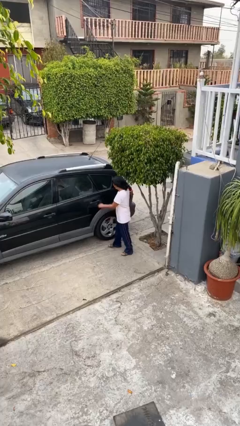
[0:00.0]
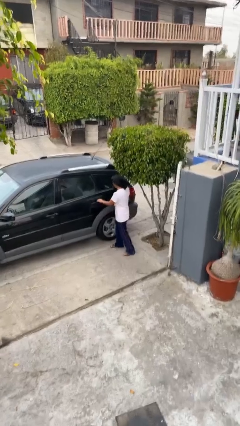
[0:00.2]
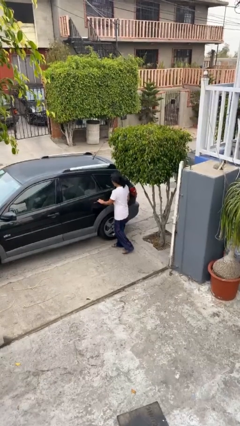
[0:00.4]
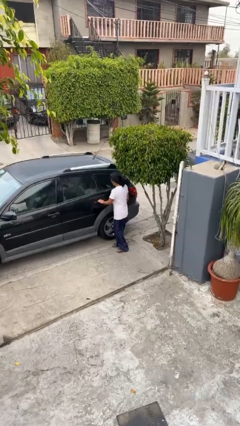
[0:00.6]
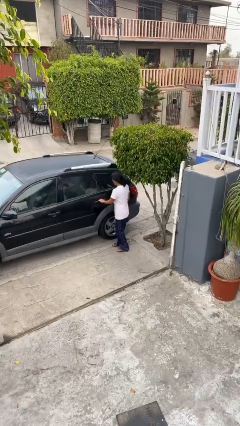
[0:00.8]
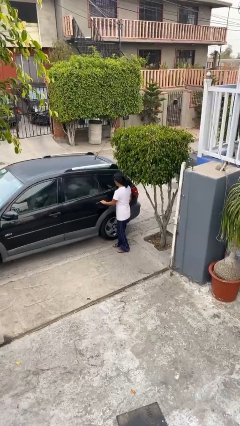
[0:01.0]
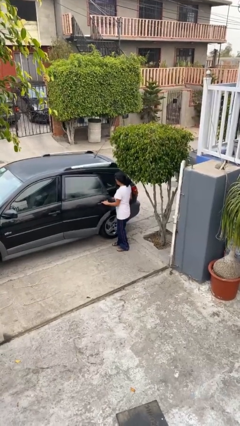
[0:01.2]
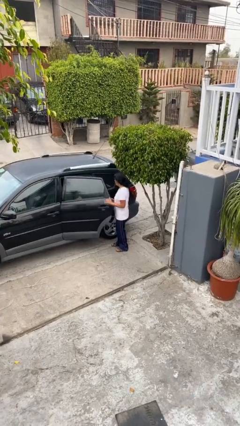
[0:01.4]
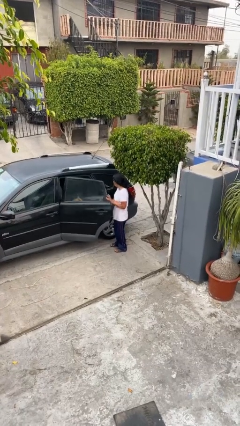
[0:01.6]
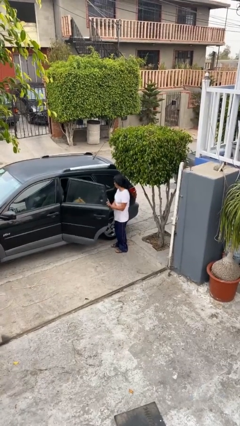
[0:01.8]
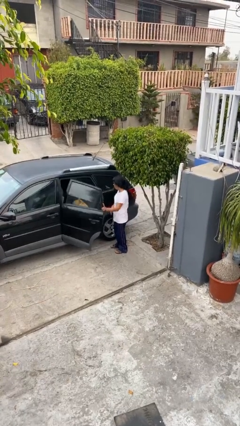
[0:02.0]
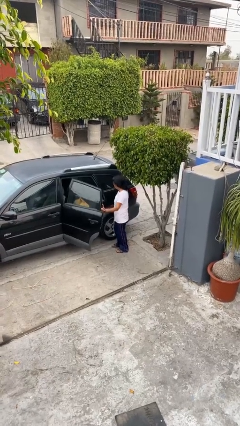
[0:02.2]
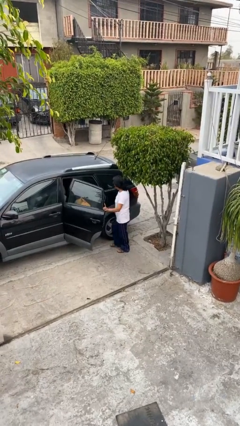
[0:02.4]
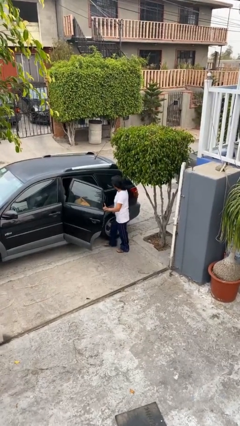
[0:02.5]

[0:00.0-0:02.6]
person opens car door

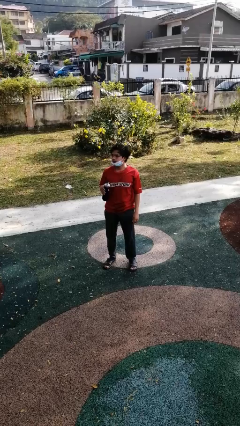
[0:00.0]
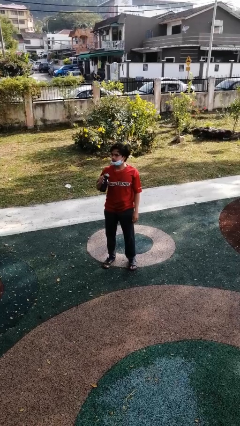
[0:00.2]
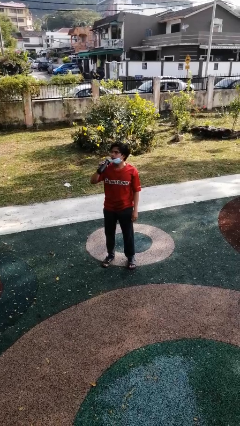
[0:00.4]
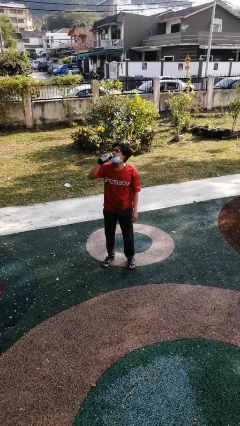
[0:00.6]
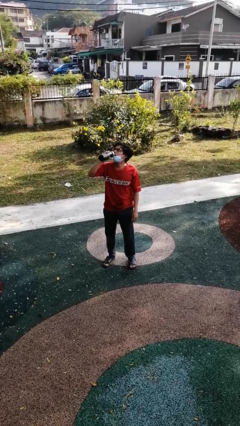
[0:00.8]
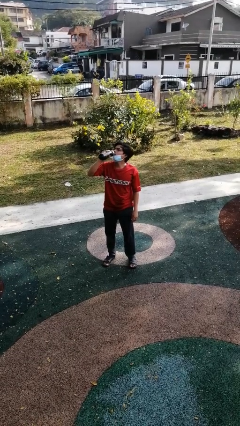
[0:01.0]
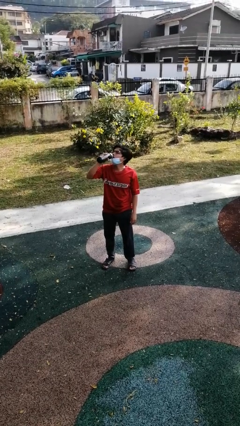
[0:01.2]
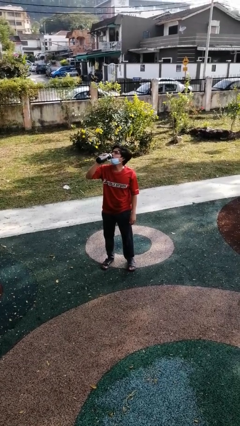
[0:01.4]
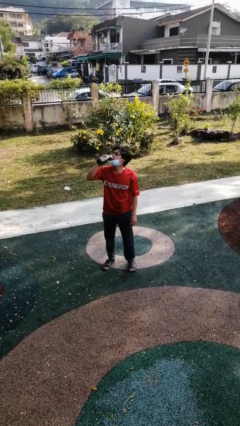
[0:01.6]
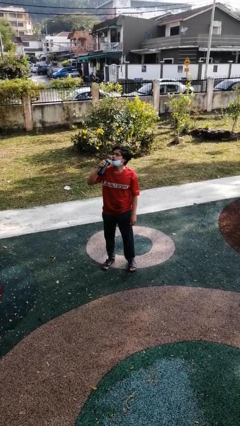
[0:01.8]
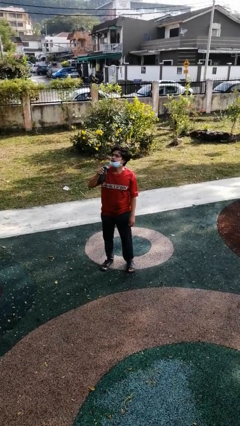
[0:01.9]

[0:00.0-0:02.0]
person drinks from bottle

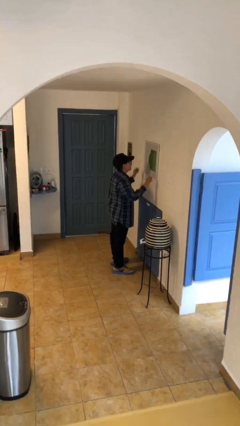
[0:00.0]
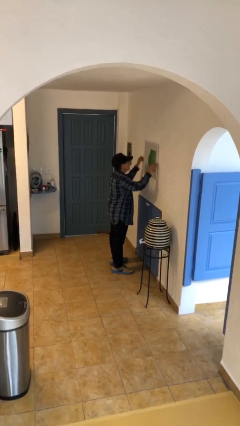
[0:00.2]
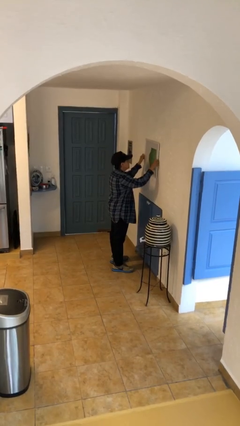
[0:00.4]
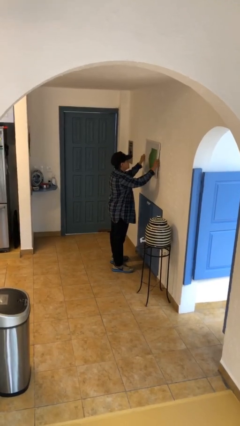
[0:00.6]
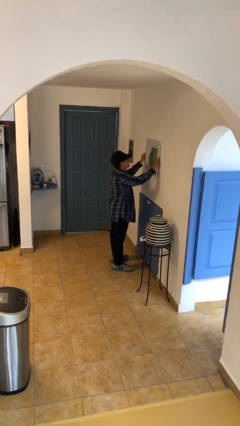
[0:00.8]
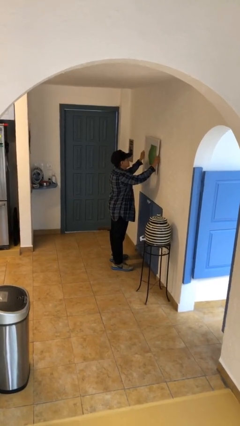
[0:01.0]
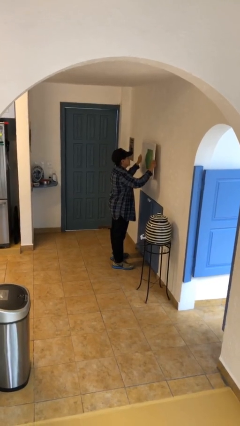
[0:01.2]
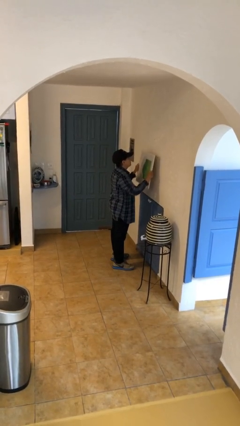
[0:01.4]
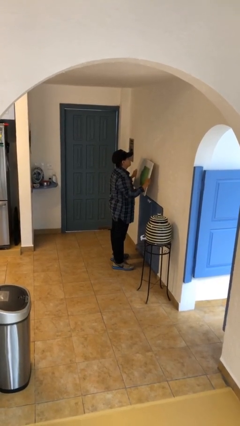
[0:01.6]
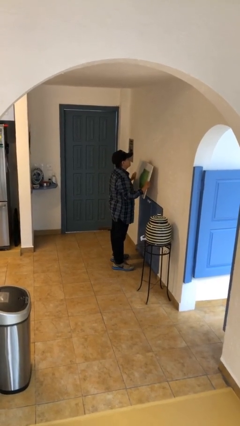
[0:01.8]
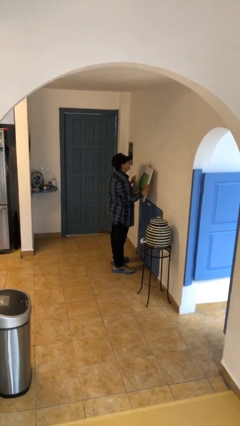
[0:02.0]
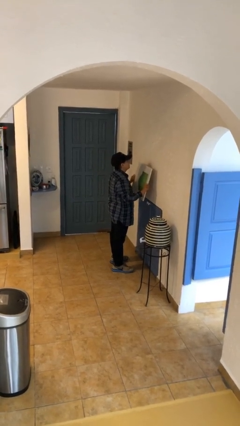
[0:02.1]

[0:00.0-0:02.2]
person takes down picture frame

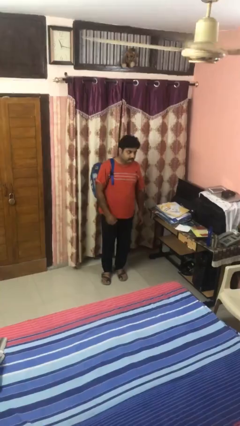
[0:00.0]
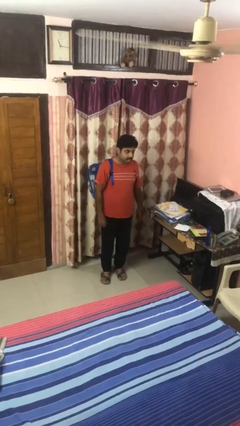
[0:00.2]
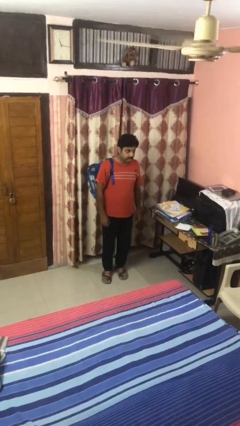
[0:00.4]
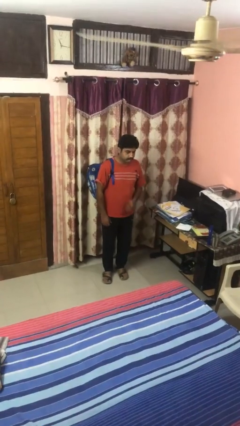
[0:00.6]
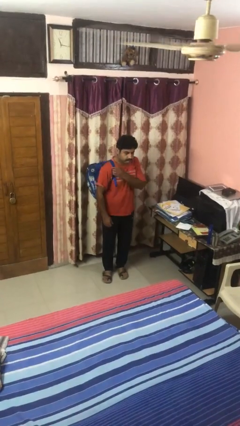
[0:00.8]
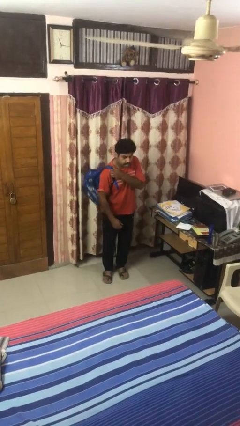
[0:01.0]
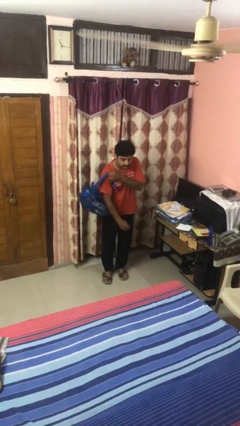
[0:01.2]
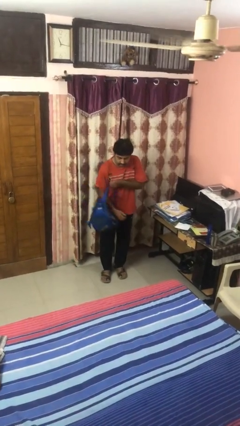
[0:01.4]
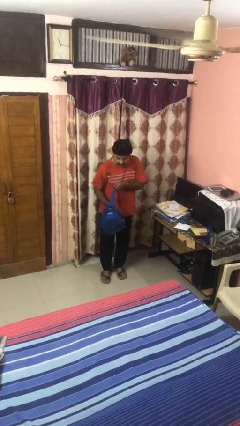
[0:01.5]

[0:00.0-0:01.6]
person takes off backpack

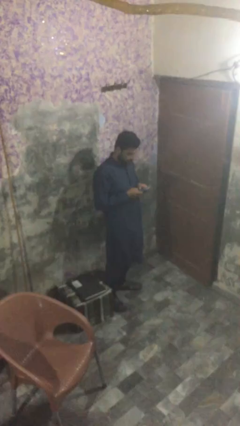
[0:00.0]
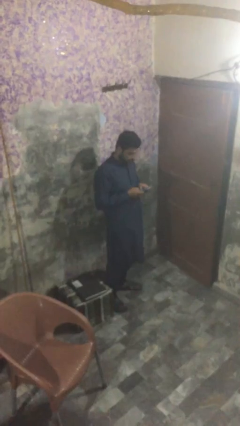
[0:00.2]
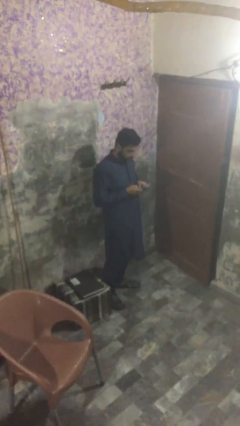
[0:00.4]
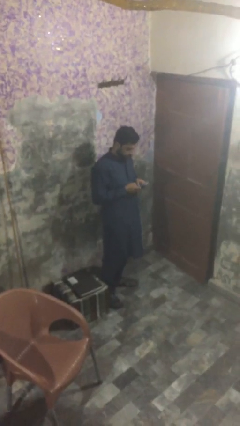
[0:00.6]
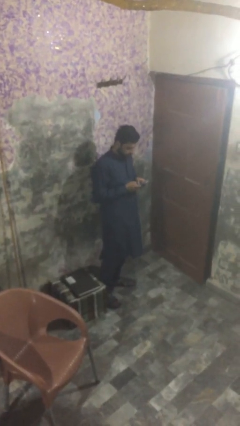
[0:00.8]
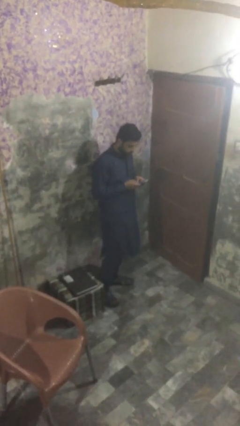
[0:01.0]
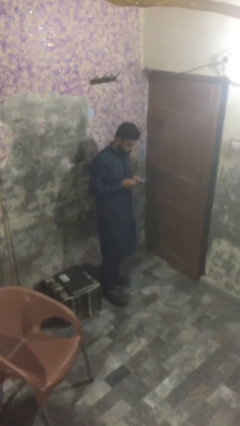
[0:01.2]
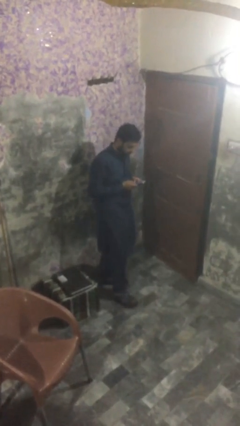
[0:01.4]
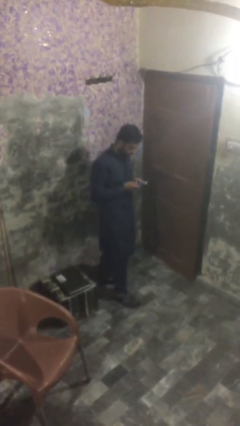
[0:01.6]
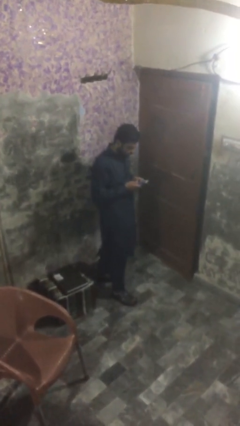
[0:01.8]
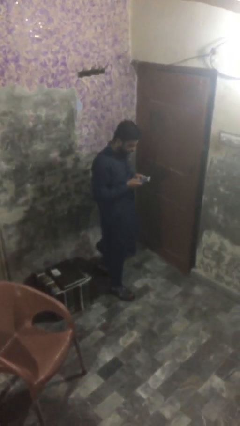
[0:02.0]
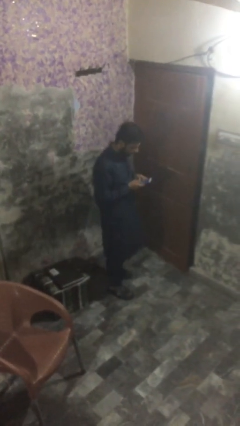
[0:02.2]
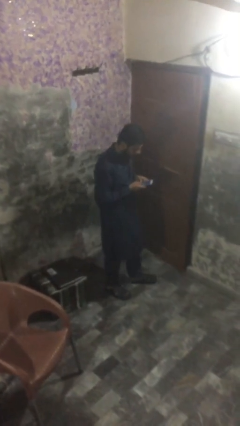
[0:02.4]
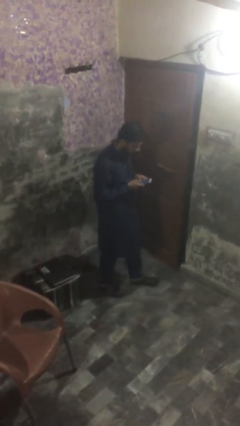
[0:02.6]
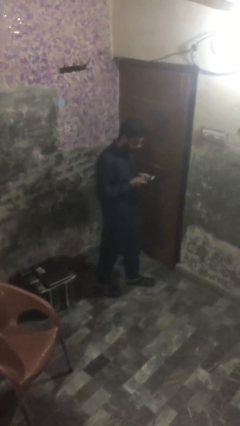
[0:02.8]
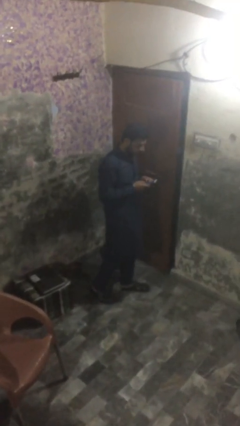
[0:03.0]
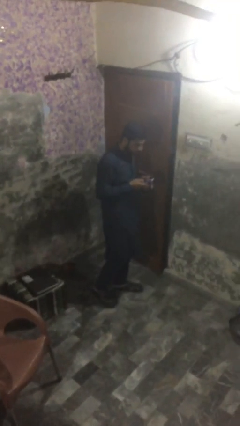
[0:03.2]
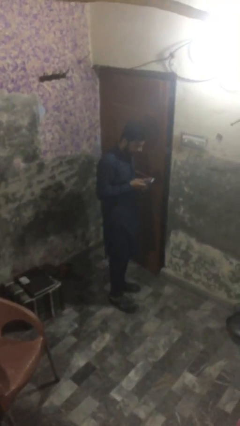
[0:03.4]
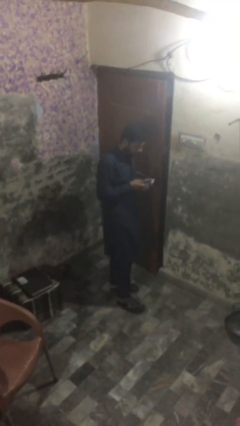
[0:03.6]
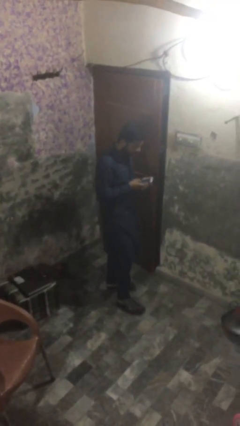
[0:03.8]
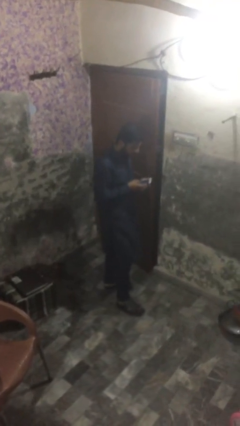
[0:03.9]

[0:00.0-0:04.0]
person texts on phone

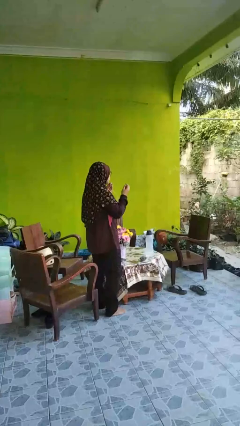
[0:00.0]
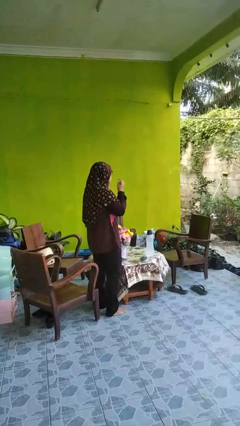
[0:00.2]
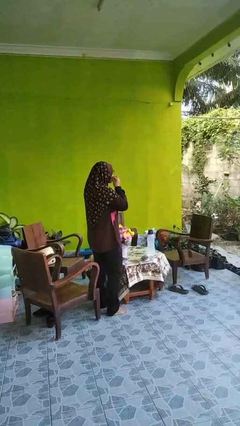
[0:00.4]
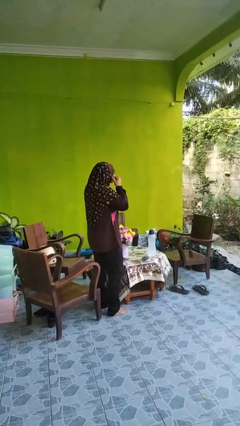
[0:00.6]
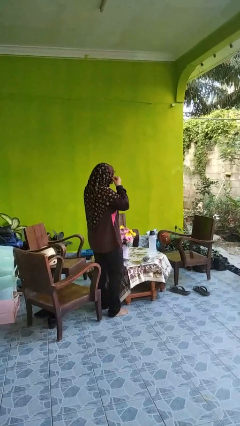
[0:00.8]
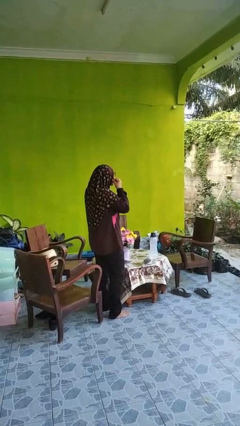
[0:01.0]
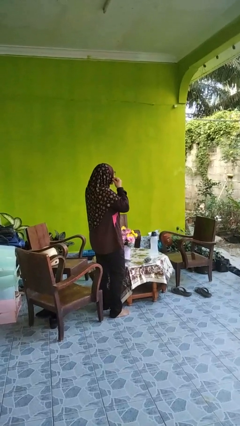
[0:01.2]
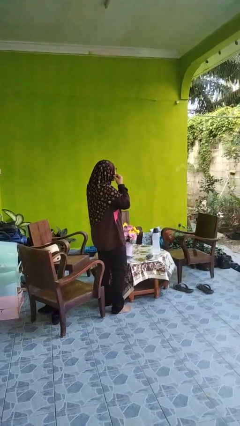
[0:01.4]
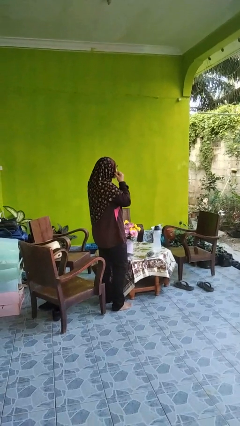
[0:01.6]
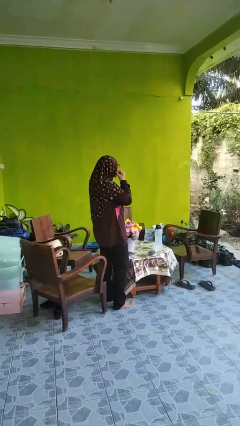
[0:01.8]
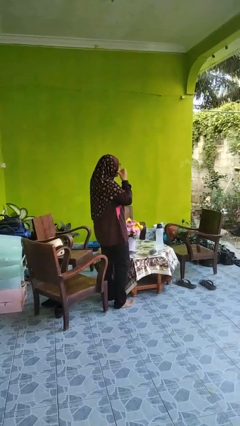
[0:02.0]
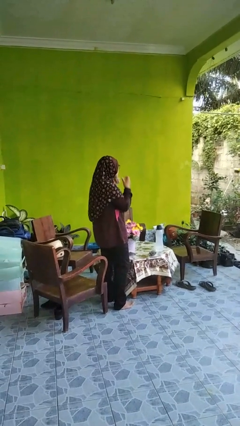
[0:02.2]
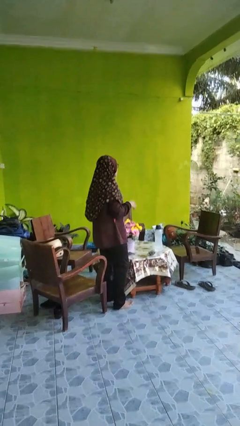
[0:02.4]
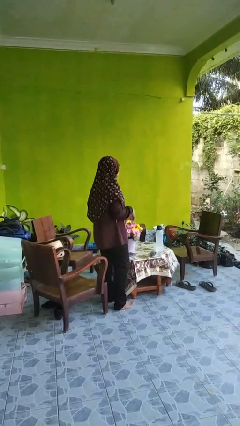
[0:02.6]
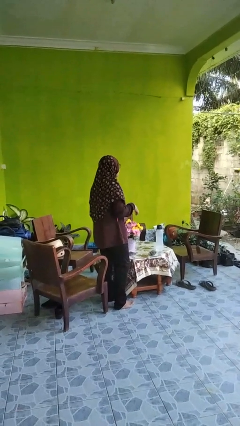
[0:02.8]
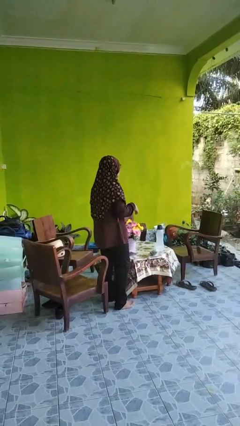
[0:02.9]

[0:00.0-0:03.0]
person puts on headphones

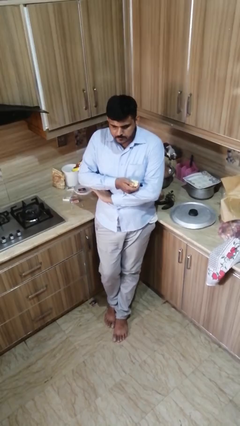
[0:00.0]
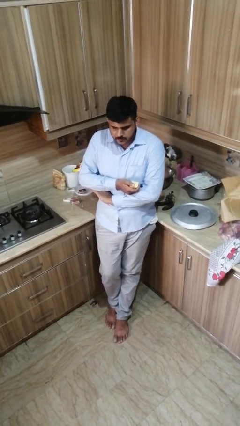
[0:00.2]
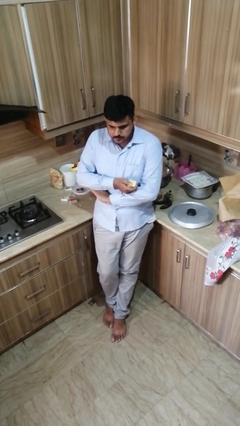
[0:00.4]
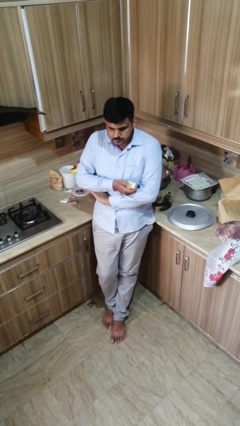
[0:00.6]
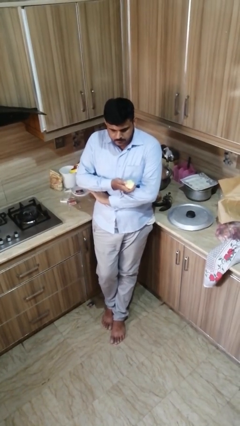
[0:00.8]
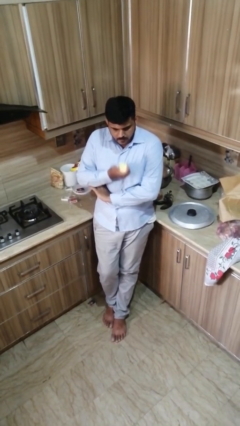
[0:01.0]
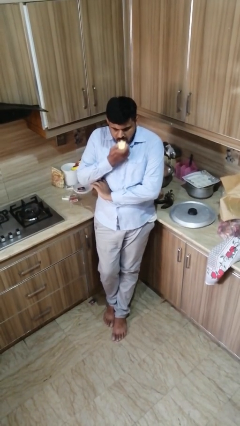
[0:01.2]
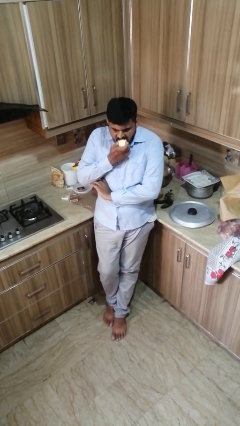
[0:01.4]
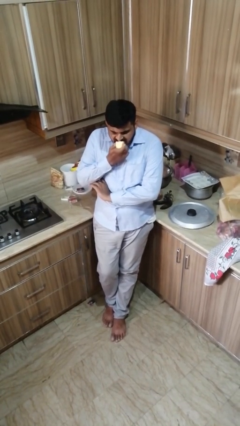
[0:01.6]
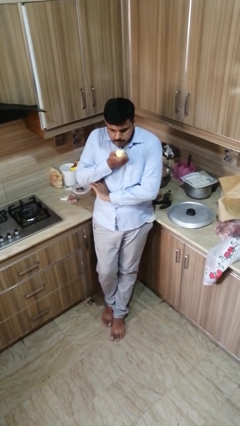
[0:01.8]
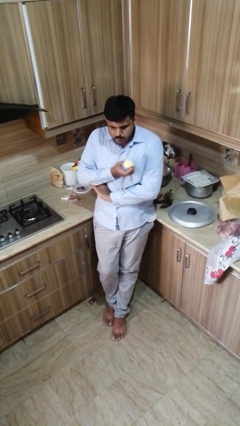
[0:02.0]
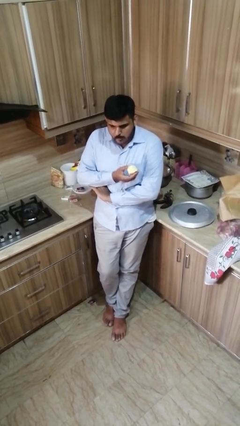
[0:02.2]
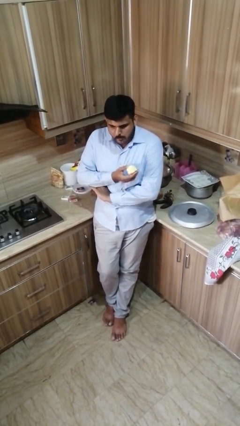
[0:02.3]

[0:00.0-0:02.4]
person eats apple
